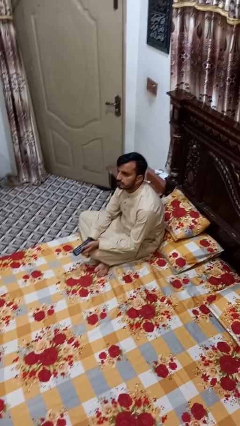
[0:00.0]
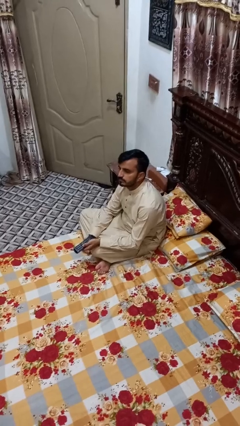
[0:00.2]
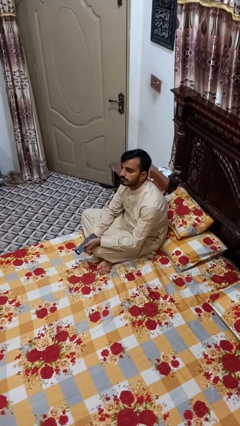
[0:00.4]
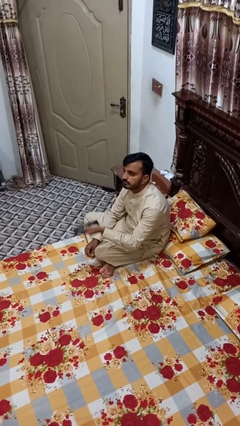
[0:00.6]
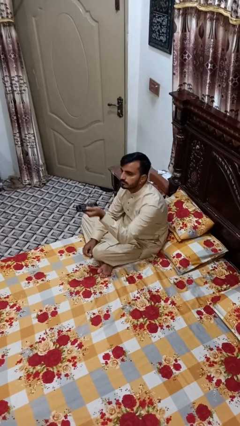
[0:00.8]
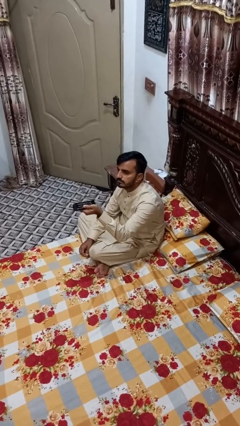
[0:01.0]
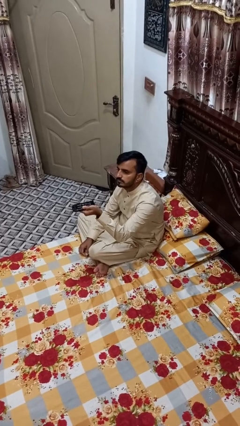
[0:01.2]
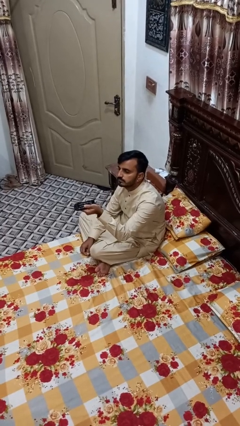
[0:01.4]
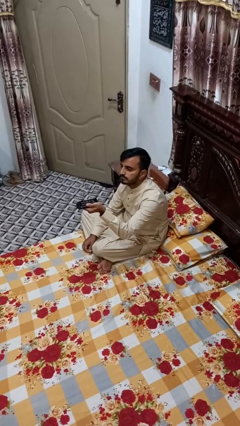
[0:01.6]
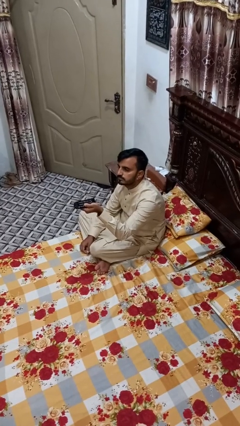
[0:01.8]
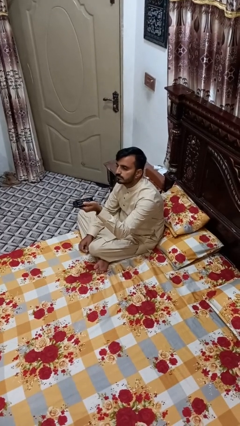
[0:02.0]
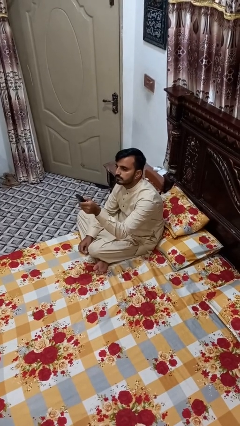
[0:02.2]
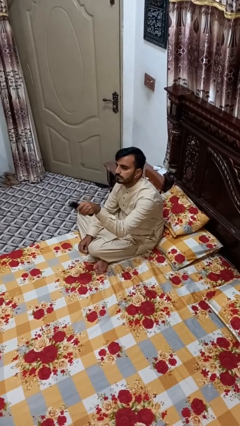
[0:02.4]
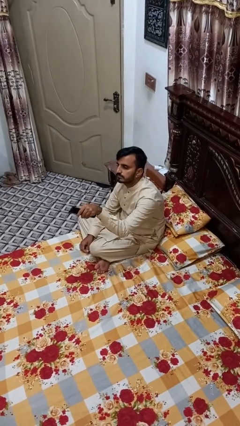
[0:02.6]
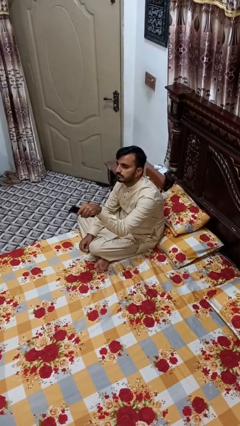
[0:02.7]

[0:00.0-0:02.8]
person uses television remote

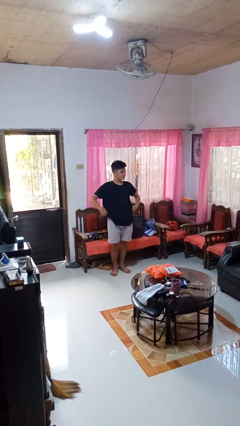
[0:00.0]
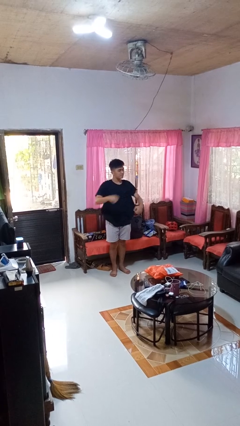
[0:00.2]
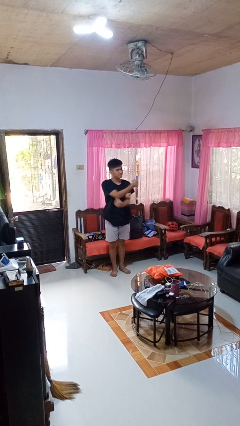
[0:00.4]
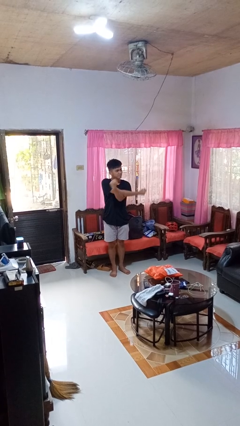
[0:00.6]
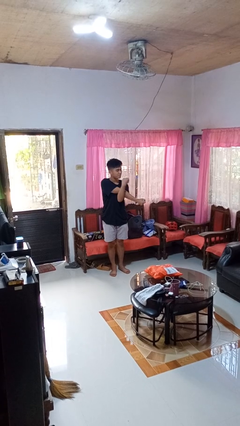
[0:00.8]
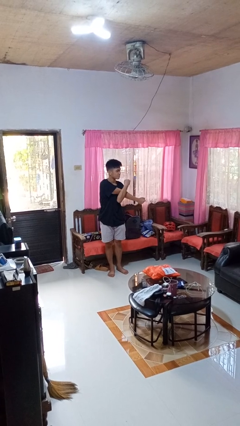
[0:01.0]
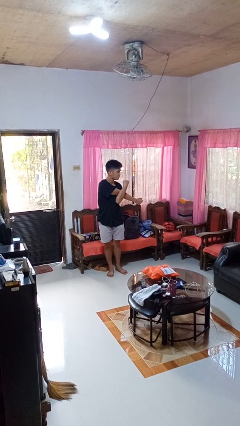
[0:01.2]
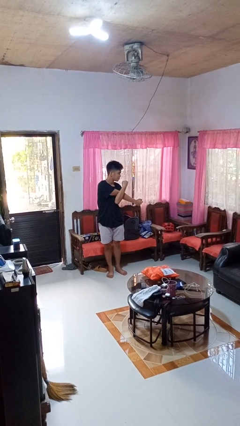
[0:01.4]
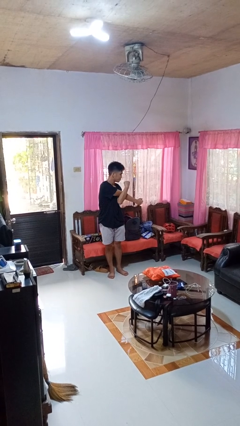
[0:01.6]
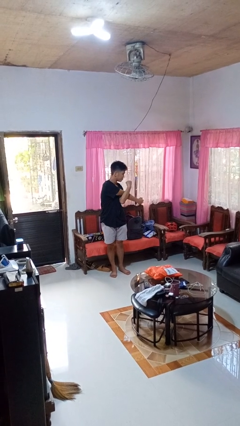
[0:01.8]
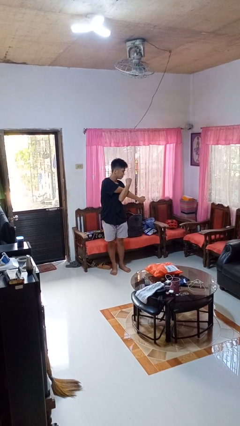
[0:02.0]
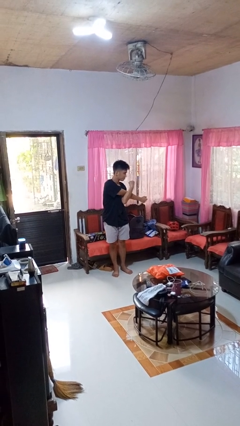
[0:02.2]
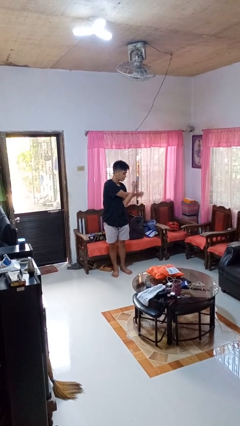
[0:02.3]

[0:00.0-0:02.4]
person stretches arms to side

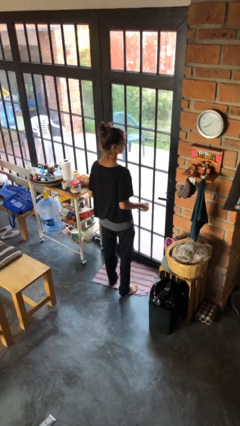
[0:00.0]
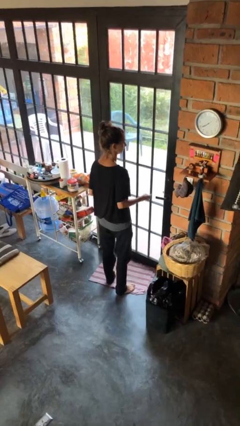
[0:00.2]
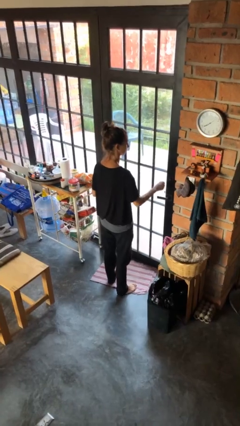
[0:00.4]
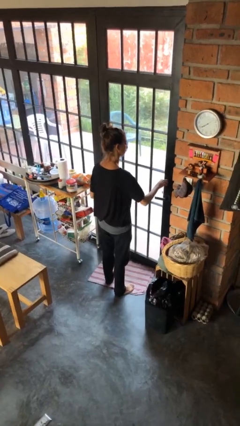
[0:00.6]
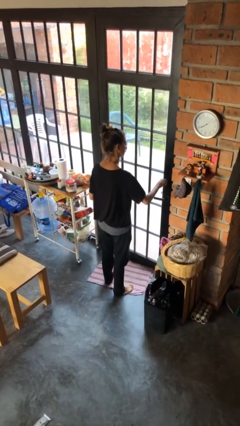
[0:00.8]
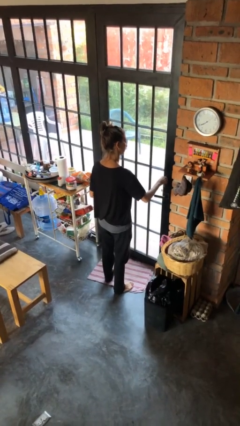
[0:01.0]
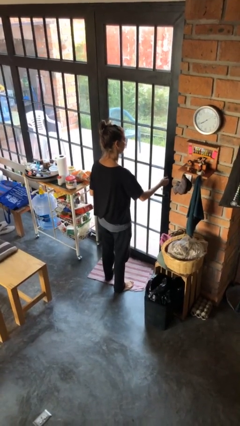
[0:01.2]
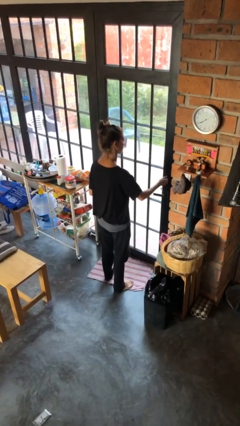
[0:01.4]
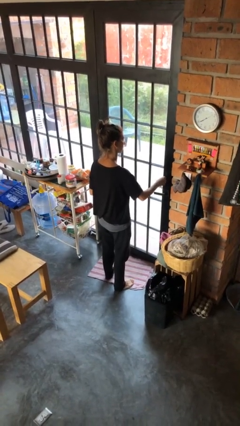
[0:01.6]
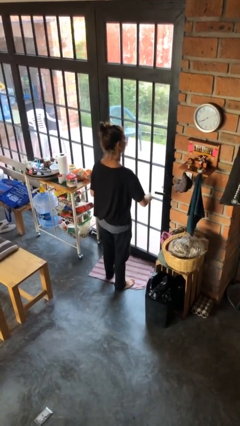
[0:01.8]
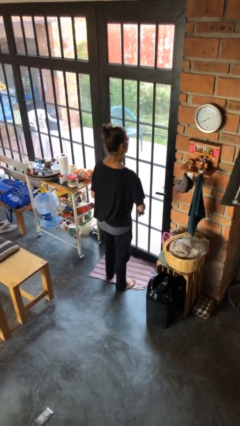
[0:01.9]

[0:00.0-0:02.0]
person locks door with keys

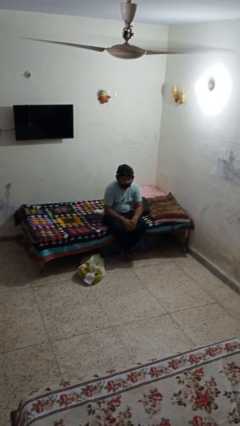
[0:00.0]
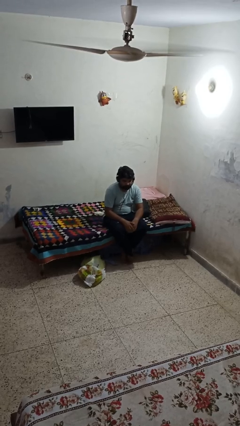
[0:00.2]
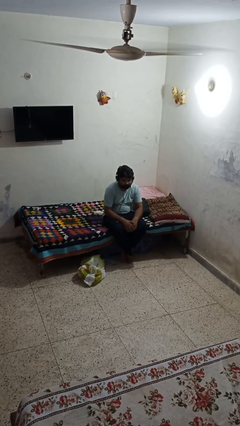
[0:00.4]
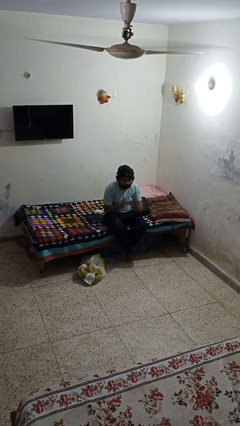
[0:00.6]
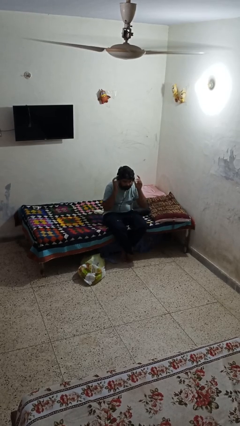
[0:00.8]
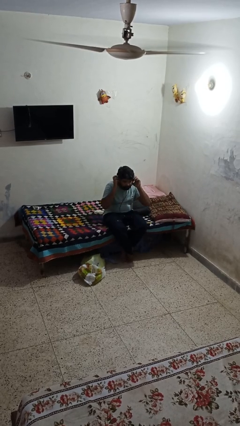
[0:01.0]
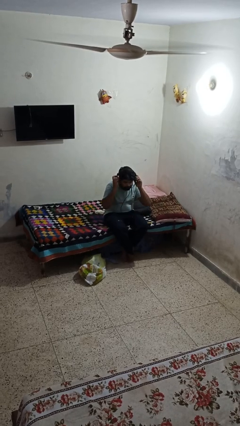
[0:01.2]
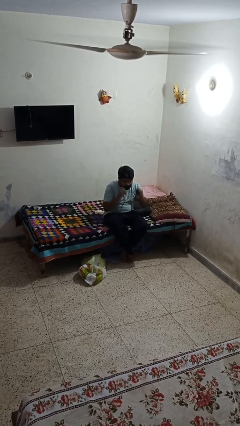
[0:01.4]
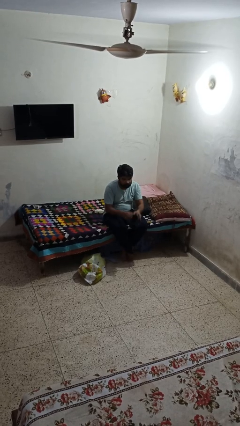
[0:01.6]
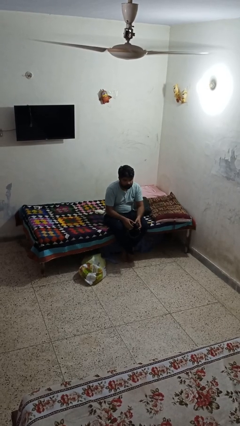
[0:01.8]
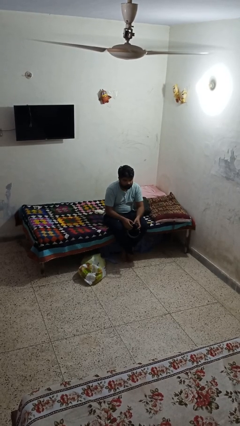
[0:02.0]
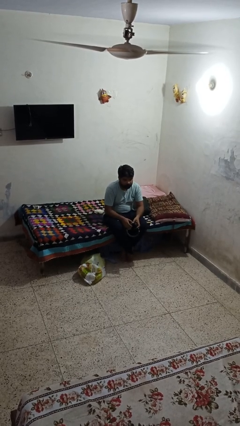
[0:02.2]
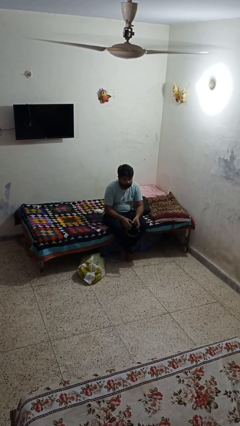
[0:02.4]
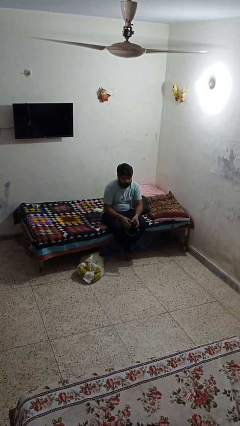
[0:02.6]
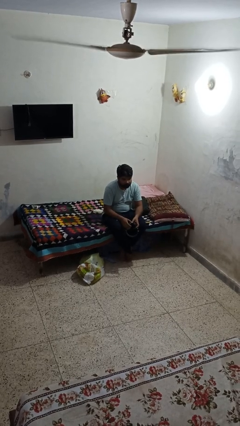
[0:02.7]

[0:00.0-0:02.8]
person takes off headphones

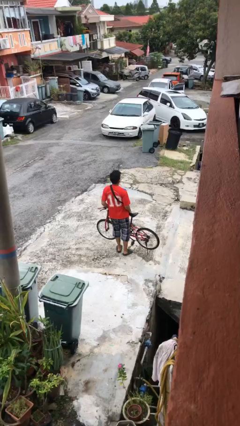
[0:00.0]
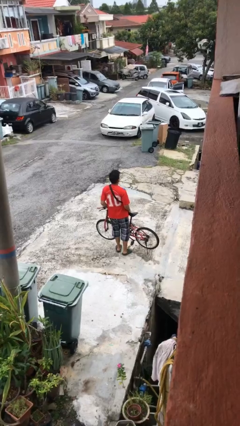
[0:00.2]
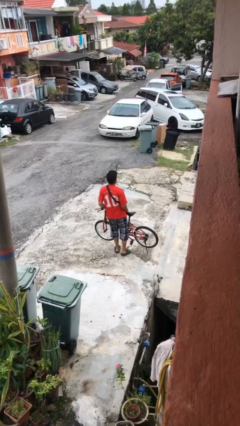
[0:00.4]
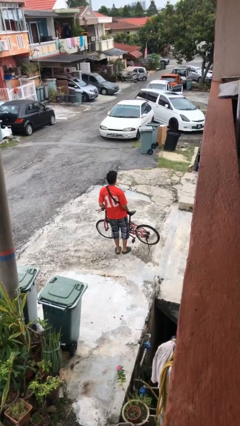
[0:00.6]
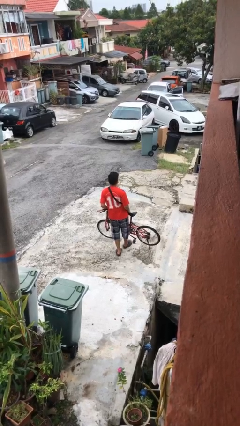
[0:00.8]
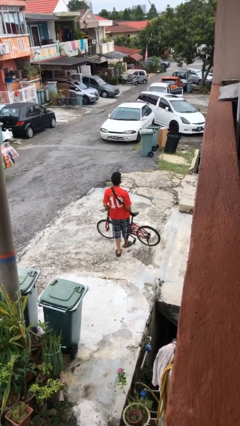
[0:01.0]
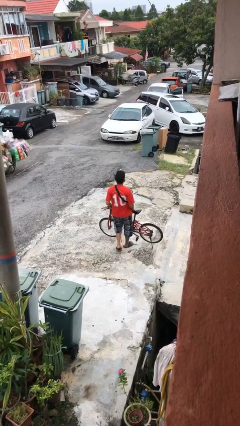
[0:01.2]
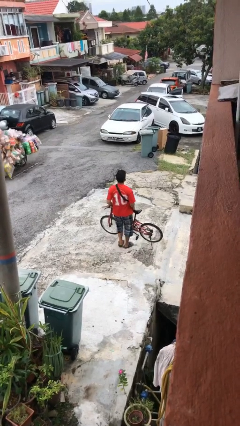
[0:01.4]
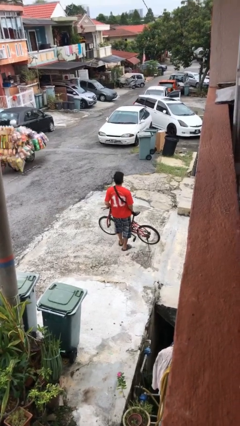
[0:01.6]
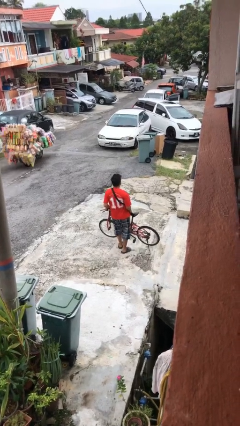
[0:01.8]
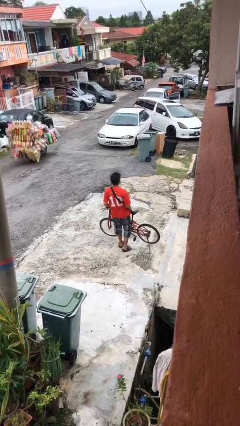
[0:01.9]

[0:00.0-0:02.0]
person carries bicycle

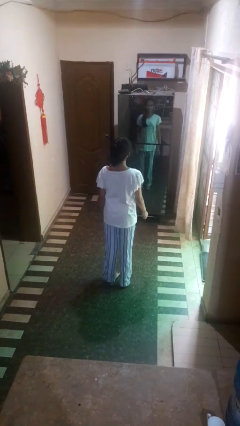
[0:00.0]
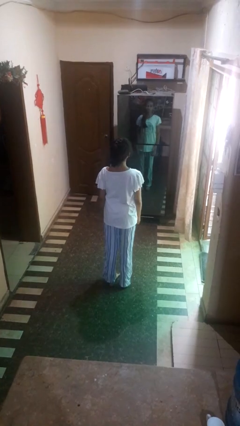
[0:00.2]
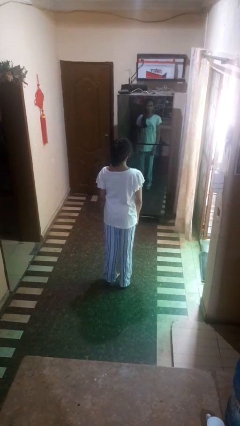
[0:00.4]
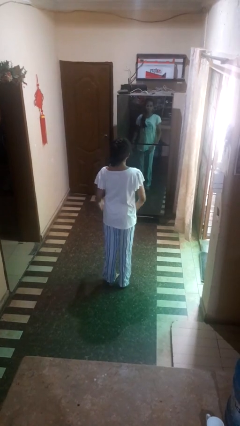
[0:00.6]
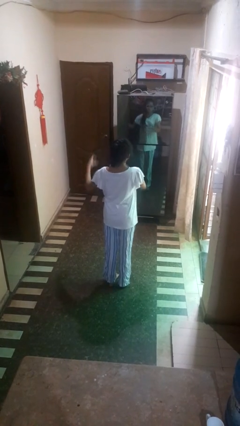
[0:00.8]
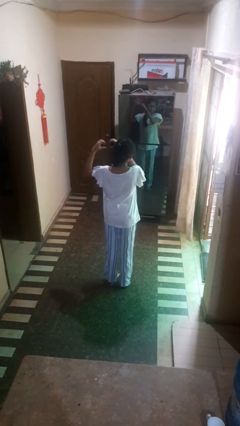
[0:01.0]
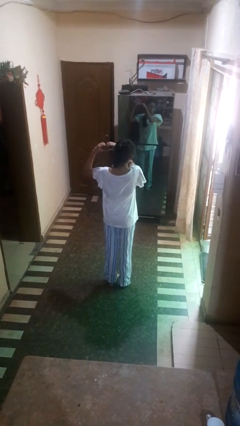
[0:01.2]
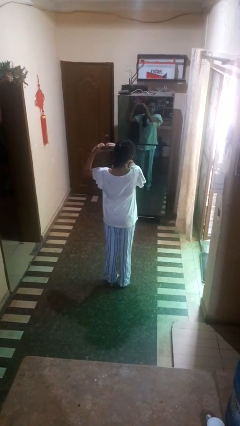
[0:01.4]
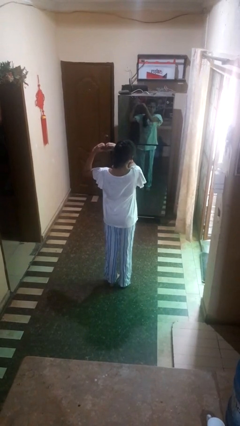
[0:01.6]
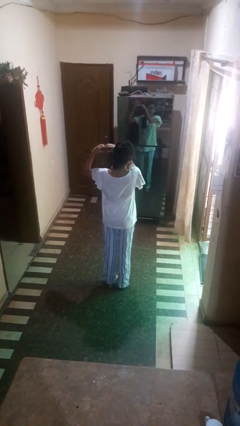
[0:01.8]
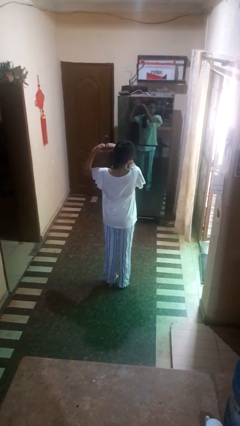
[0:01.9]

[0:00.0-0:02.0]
person gestures heart

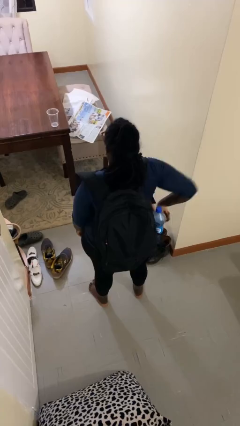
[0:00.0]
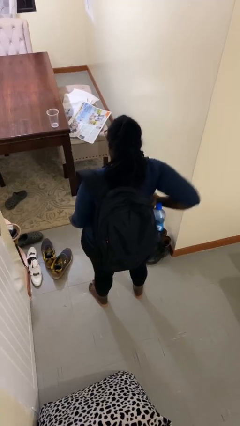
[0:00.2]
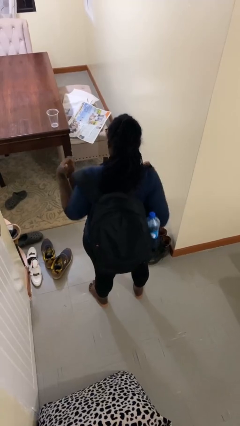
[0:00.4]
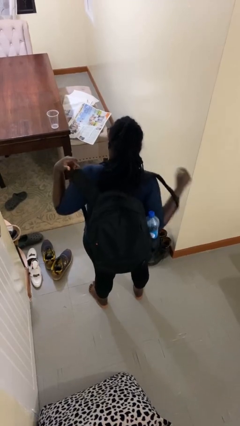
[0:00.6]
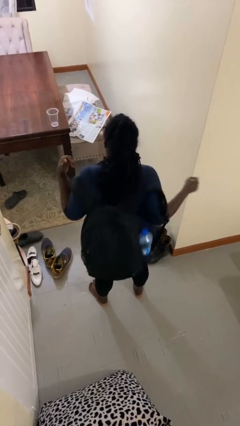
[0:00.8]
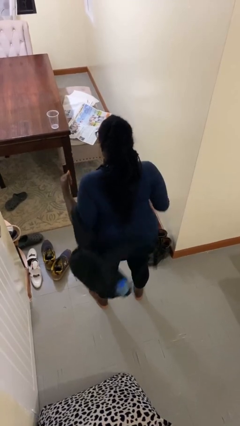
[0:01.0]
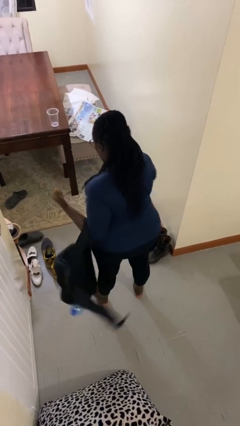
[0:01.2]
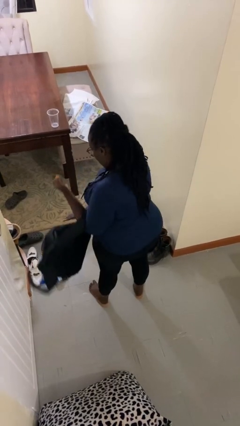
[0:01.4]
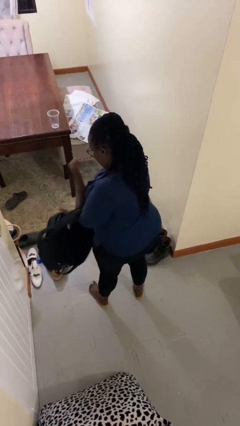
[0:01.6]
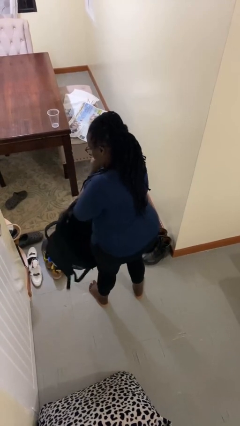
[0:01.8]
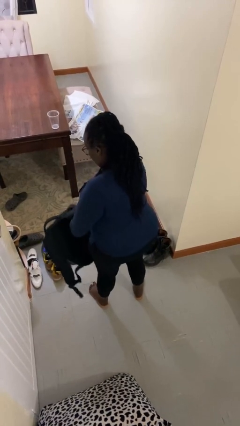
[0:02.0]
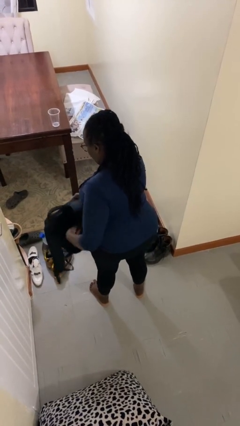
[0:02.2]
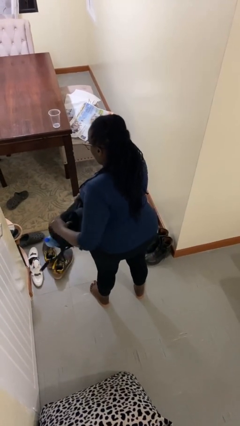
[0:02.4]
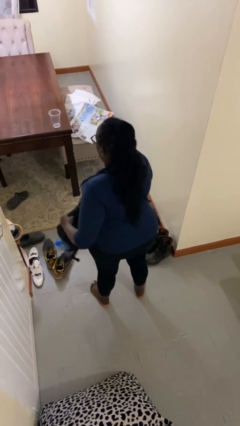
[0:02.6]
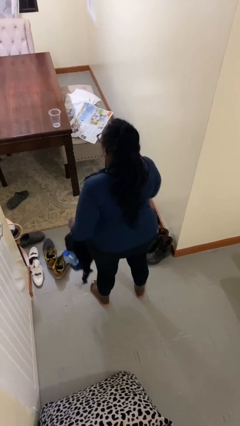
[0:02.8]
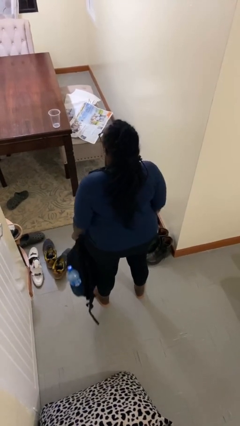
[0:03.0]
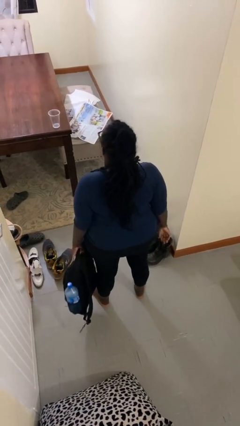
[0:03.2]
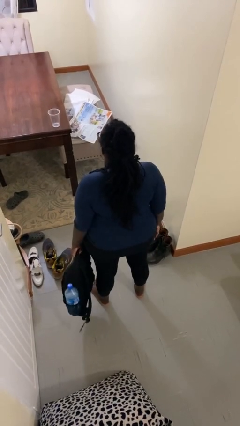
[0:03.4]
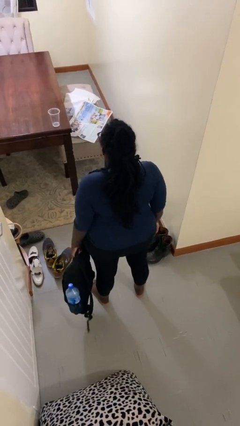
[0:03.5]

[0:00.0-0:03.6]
person takes off backpack
